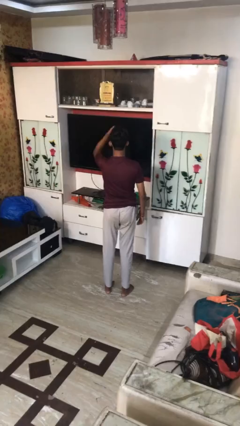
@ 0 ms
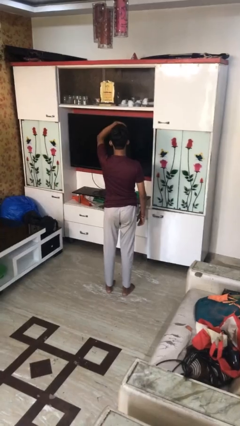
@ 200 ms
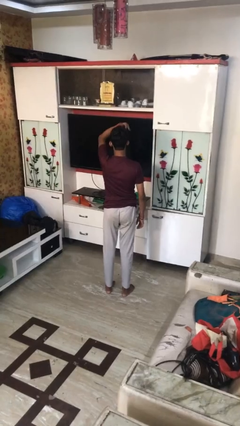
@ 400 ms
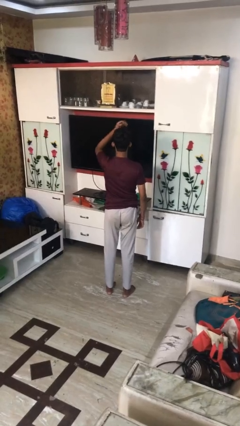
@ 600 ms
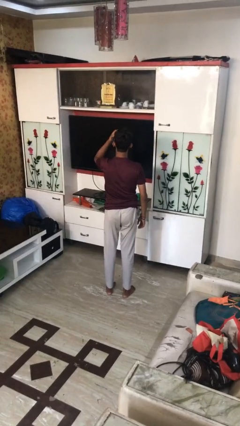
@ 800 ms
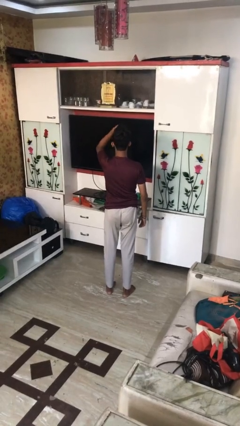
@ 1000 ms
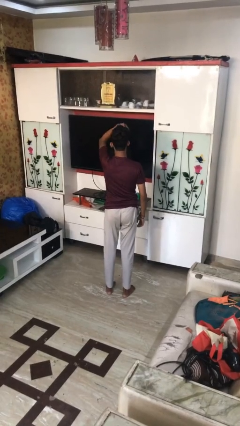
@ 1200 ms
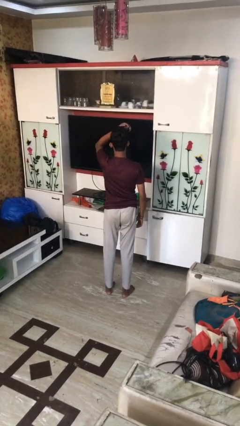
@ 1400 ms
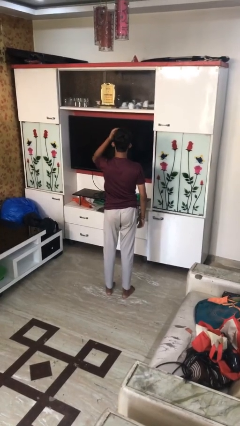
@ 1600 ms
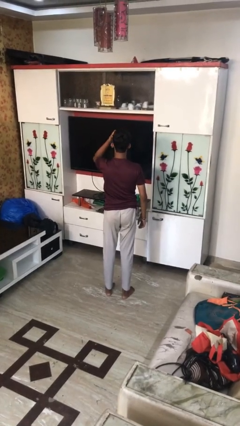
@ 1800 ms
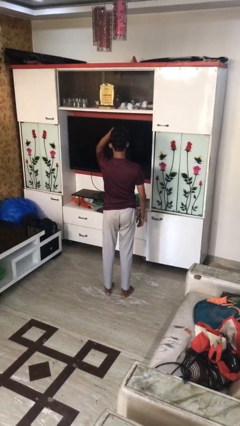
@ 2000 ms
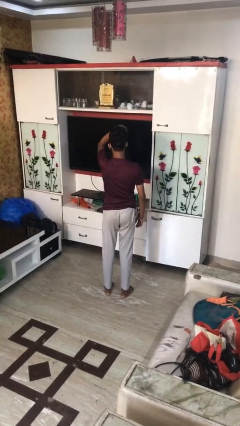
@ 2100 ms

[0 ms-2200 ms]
person strokes hair

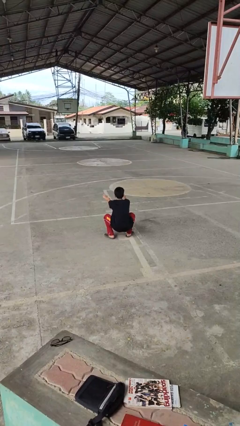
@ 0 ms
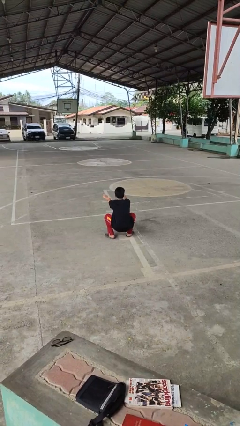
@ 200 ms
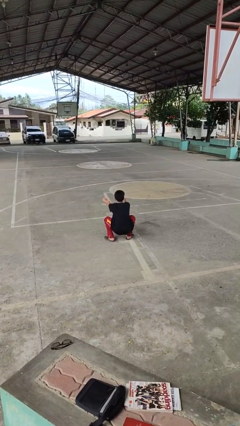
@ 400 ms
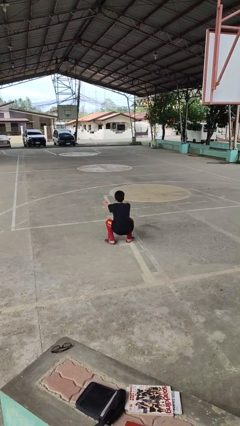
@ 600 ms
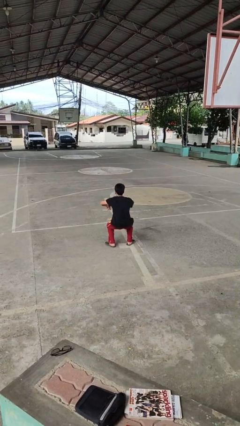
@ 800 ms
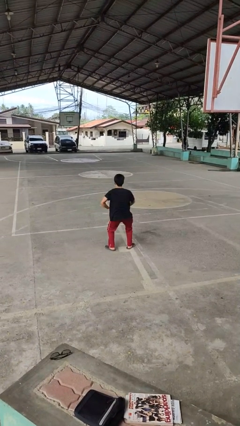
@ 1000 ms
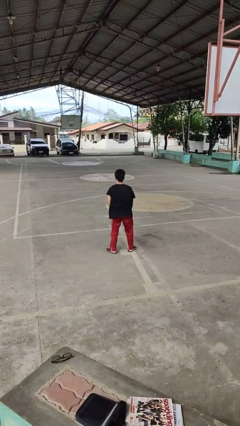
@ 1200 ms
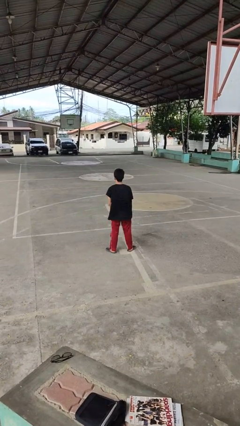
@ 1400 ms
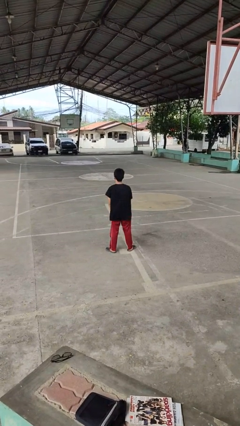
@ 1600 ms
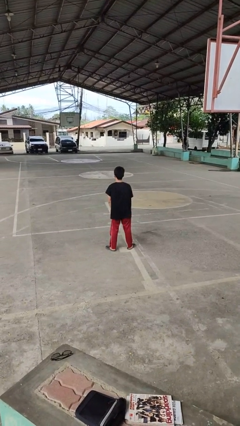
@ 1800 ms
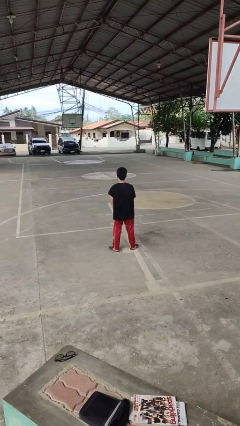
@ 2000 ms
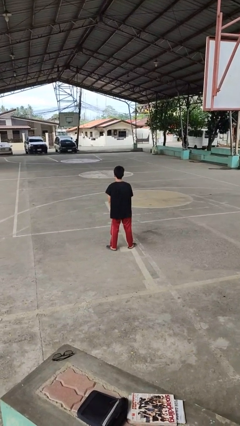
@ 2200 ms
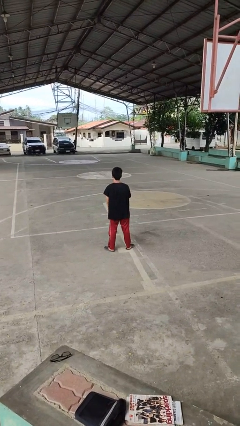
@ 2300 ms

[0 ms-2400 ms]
person stands up

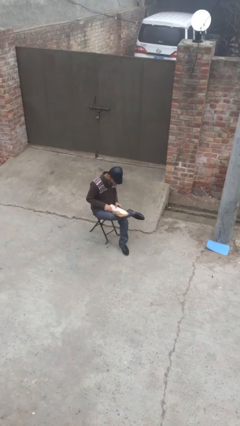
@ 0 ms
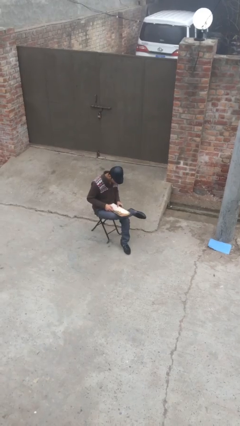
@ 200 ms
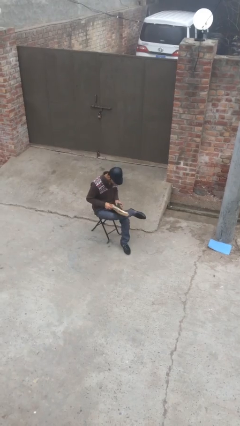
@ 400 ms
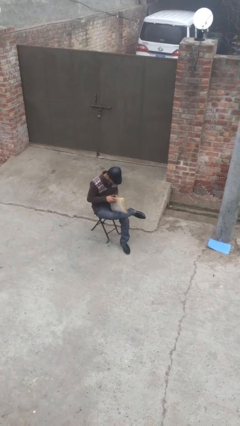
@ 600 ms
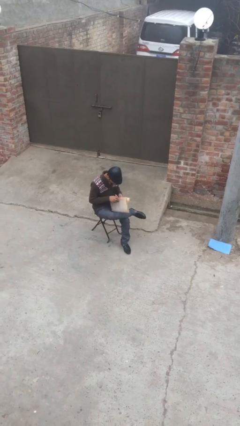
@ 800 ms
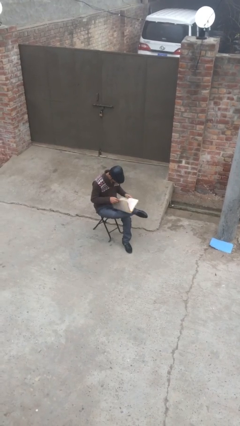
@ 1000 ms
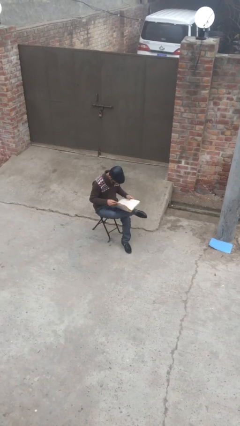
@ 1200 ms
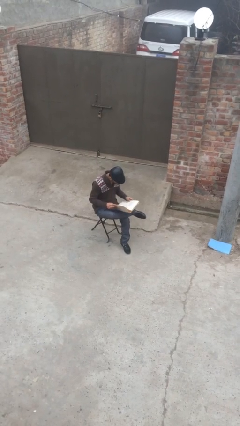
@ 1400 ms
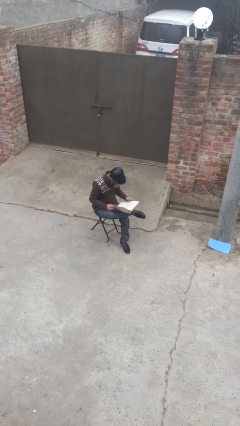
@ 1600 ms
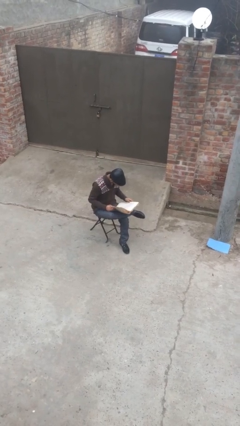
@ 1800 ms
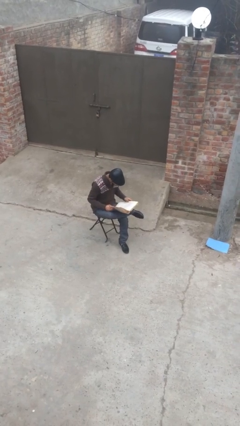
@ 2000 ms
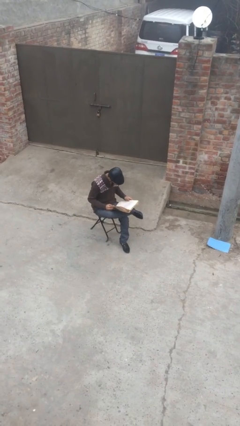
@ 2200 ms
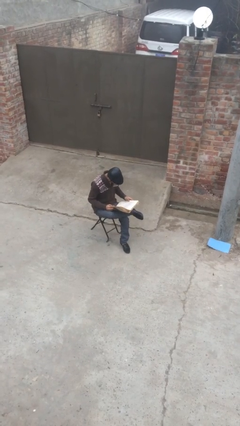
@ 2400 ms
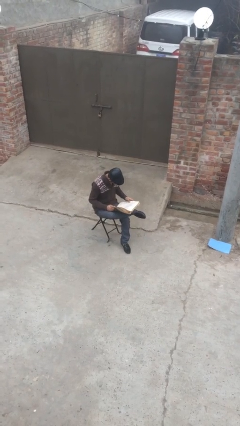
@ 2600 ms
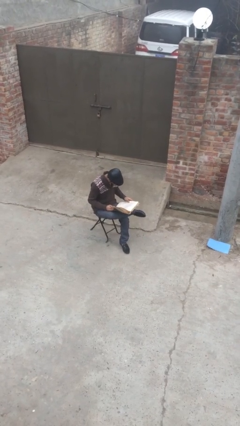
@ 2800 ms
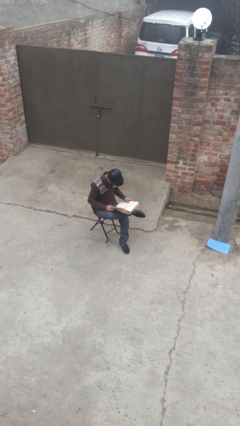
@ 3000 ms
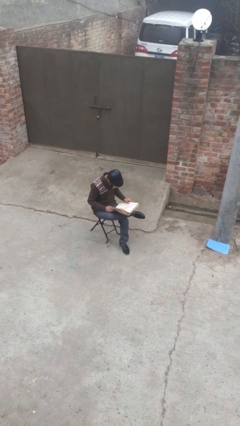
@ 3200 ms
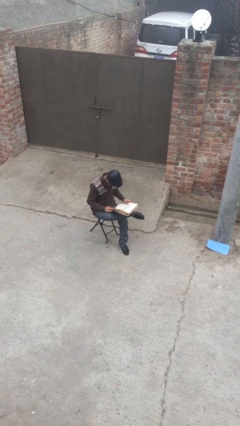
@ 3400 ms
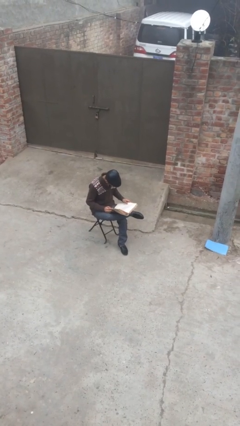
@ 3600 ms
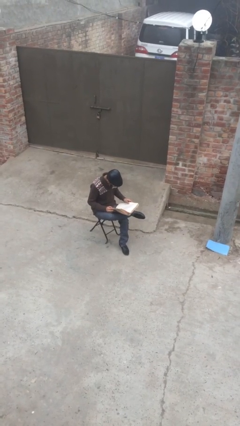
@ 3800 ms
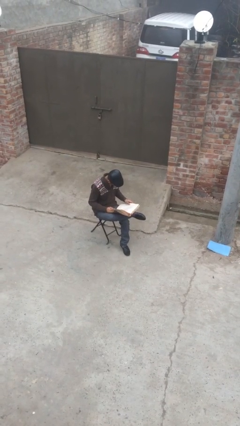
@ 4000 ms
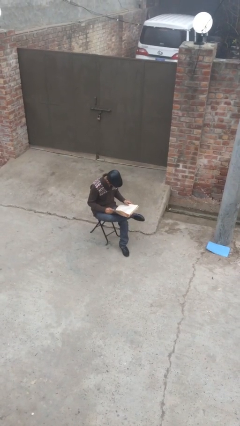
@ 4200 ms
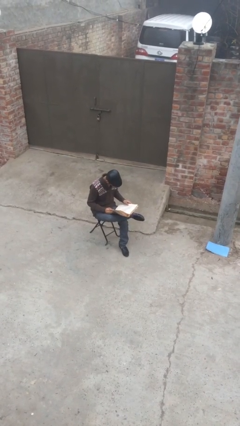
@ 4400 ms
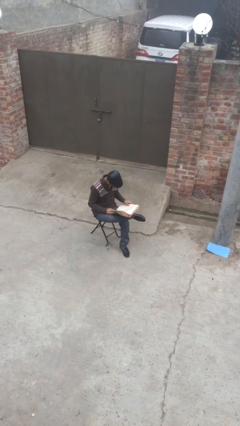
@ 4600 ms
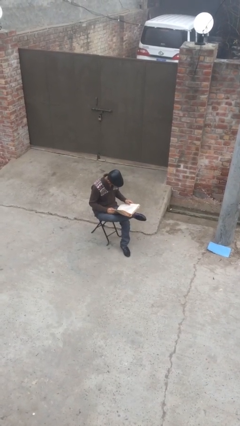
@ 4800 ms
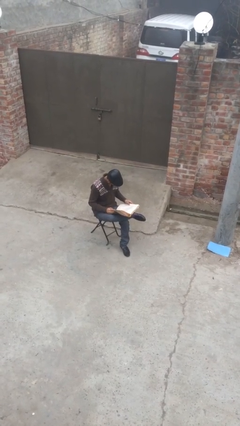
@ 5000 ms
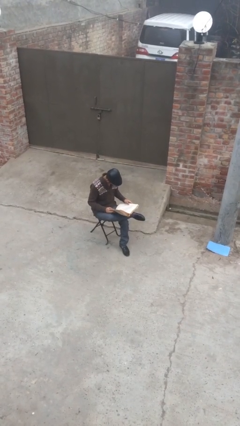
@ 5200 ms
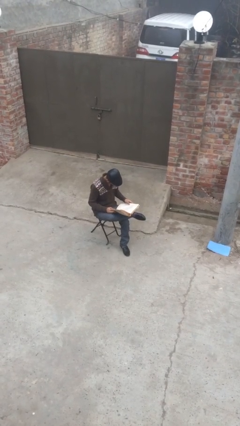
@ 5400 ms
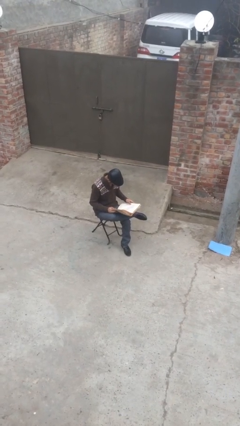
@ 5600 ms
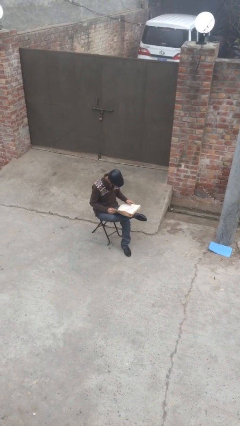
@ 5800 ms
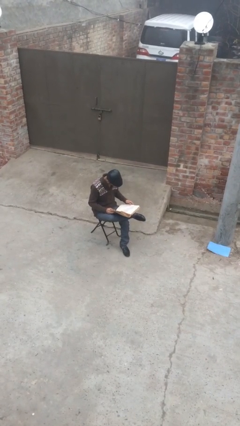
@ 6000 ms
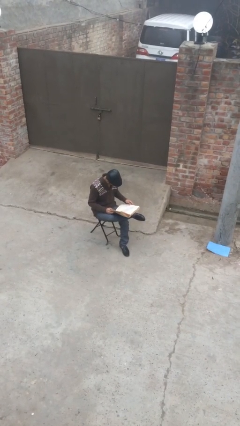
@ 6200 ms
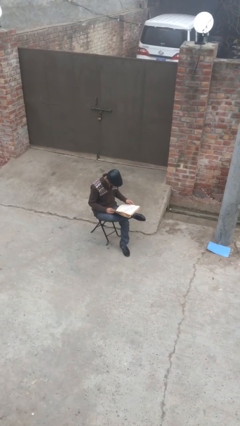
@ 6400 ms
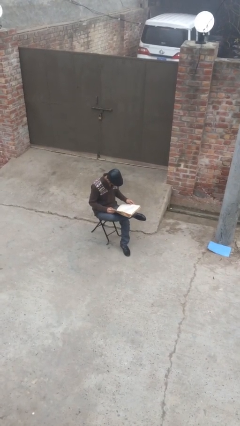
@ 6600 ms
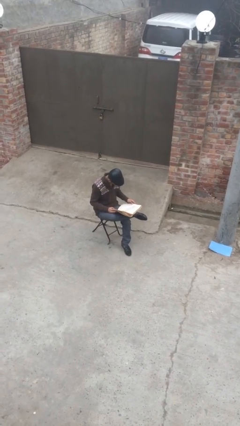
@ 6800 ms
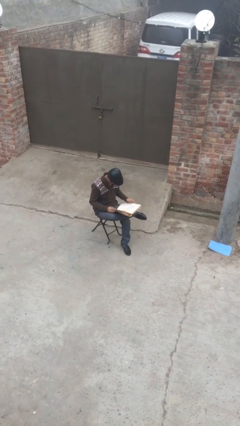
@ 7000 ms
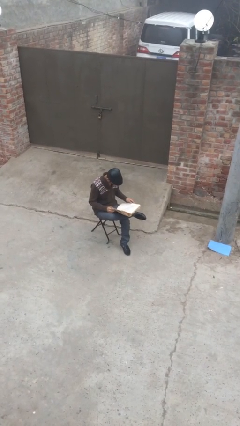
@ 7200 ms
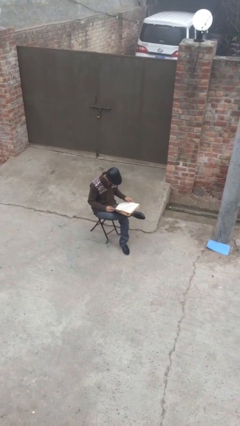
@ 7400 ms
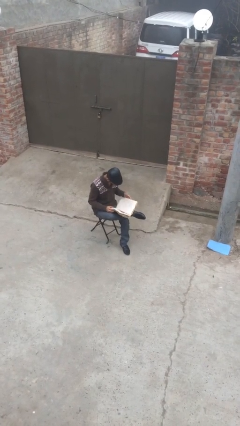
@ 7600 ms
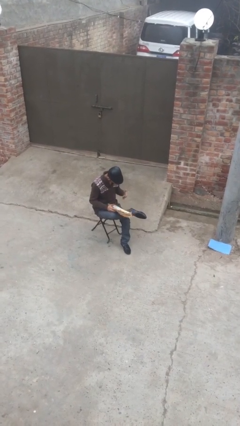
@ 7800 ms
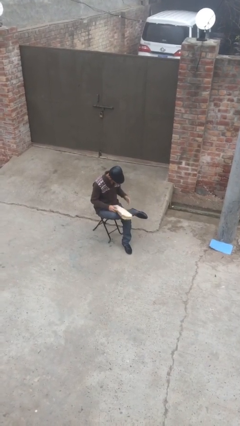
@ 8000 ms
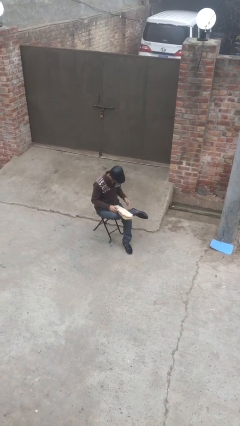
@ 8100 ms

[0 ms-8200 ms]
person reads document

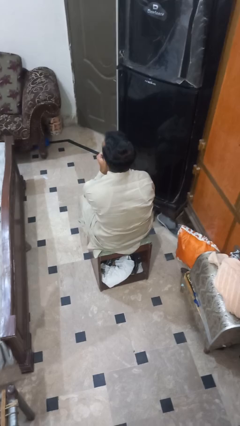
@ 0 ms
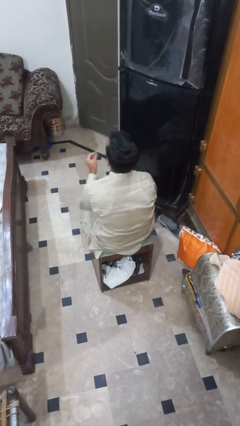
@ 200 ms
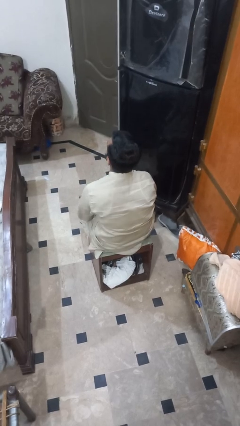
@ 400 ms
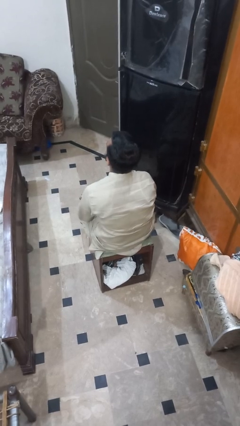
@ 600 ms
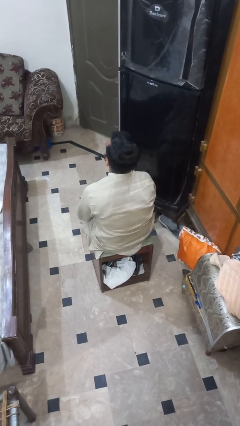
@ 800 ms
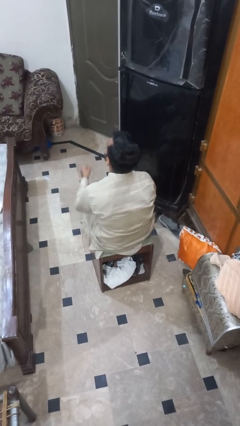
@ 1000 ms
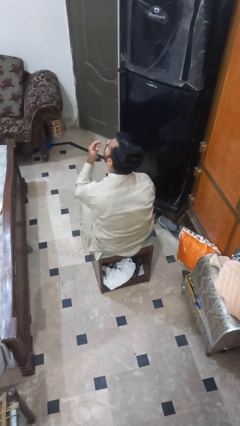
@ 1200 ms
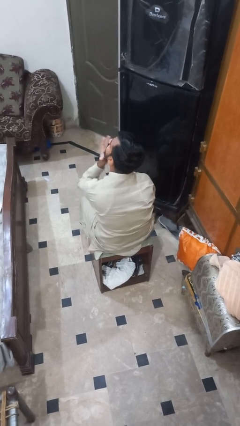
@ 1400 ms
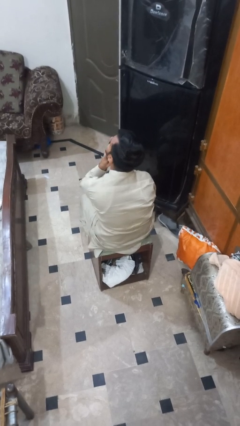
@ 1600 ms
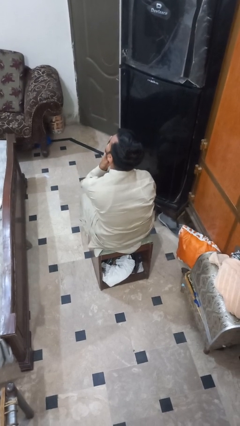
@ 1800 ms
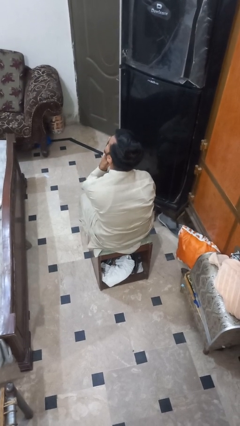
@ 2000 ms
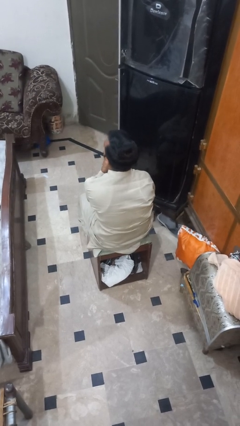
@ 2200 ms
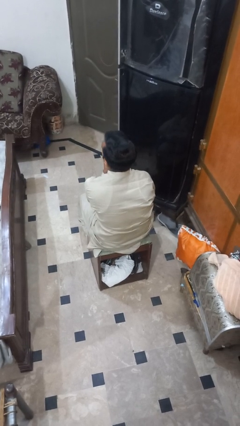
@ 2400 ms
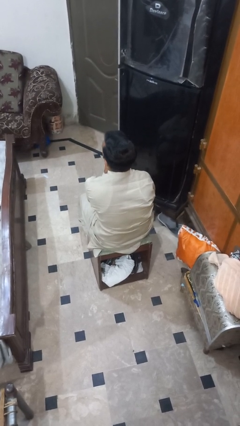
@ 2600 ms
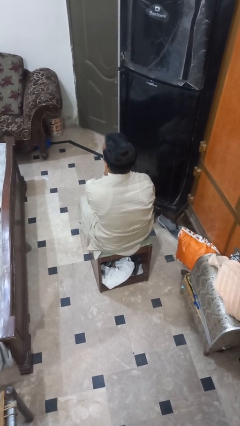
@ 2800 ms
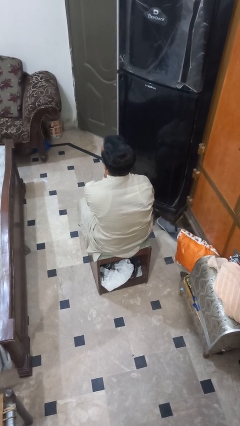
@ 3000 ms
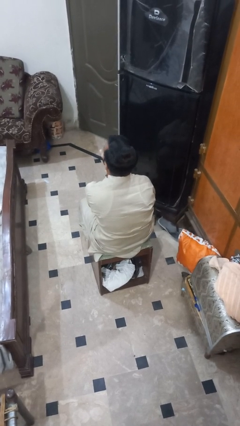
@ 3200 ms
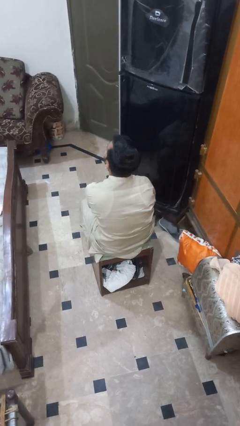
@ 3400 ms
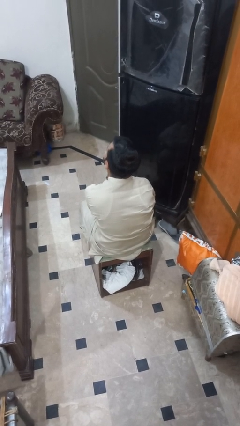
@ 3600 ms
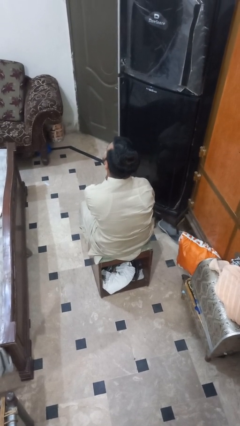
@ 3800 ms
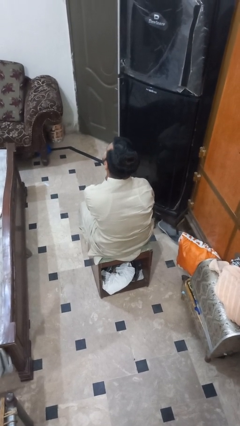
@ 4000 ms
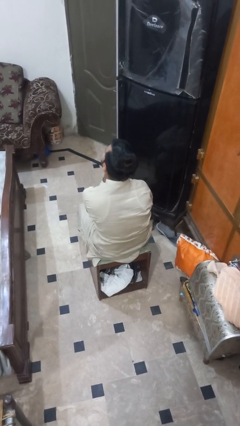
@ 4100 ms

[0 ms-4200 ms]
person strokes chin

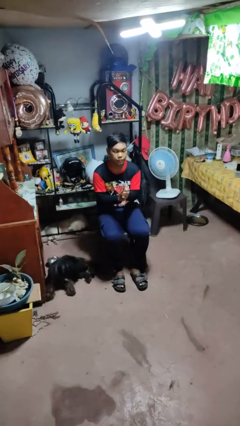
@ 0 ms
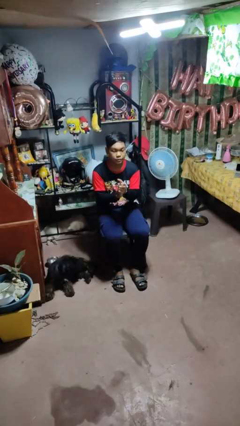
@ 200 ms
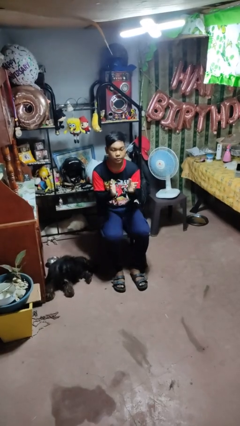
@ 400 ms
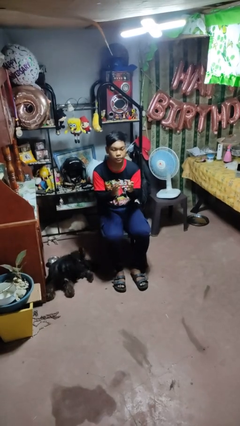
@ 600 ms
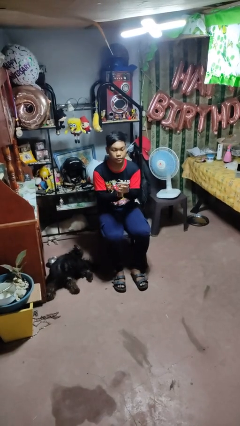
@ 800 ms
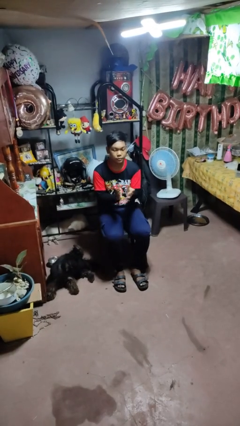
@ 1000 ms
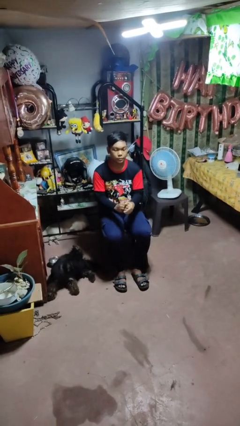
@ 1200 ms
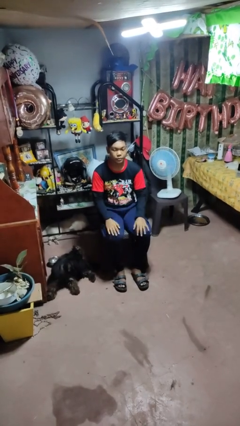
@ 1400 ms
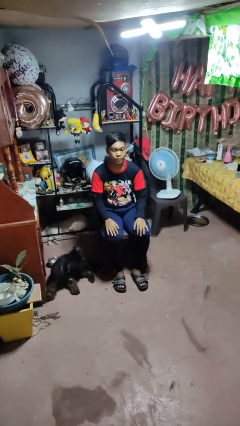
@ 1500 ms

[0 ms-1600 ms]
person claps hands
